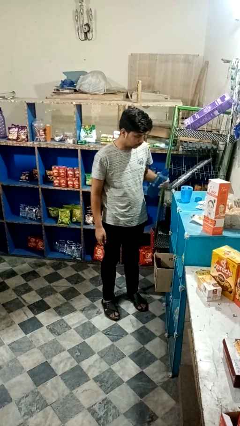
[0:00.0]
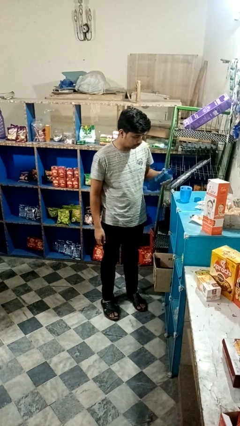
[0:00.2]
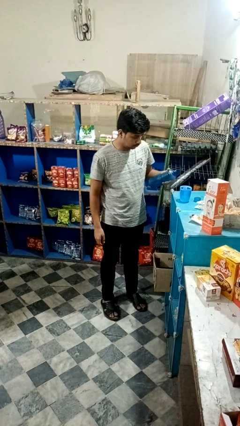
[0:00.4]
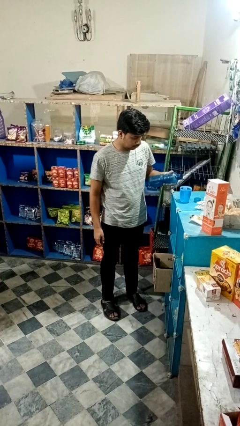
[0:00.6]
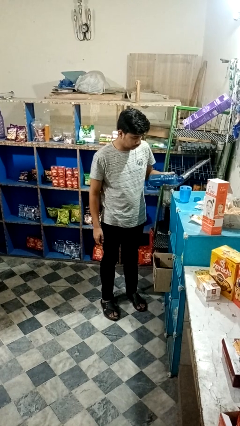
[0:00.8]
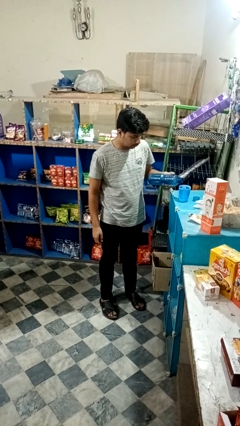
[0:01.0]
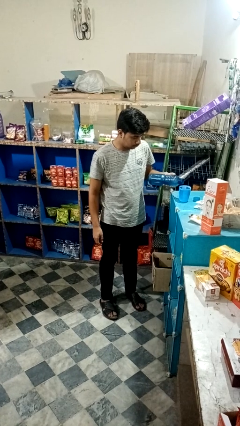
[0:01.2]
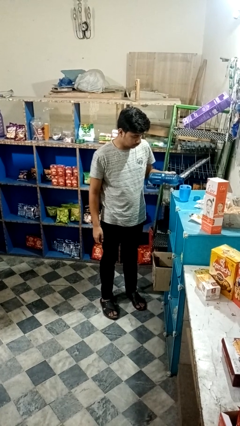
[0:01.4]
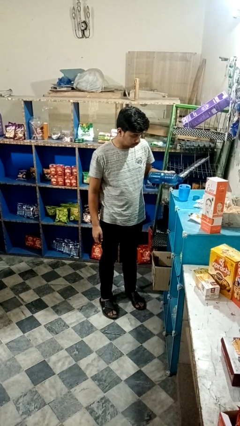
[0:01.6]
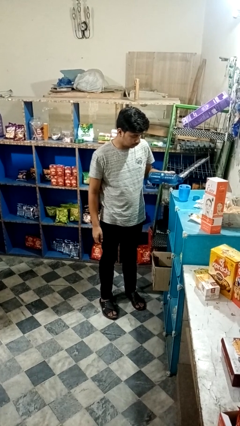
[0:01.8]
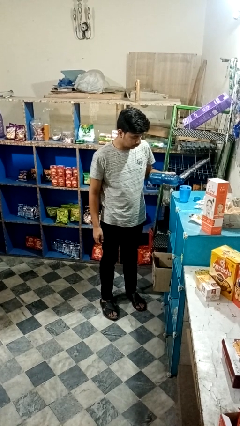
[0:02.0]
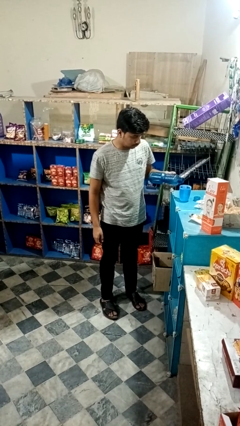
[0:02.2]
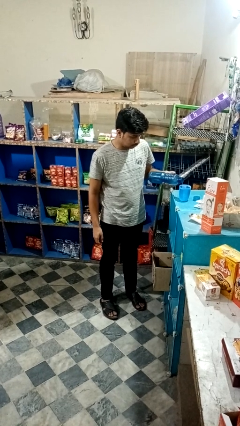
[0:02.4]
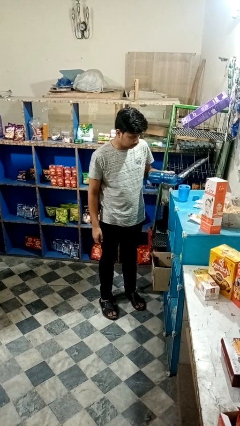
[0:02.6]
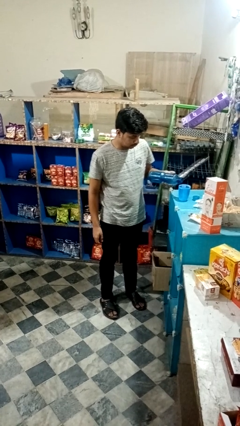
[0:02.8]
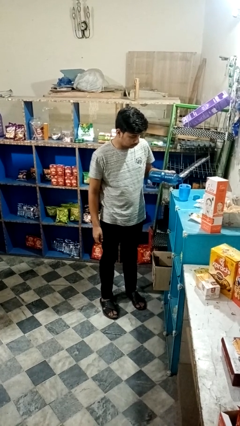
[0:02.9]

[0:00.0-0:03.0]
person pours liquid into cup

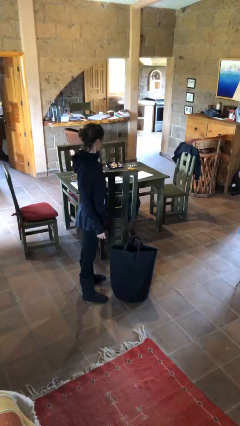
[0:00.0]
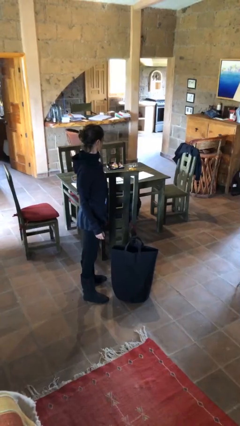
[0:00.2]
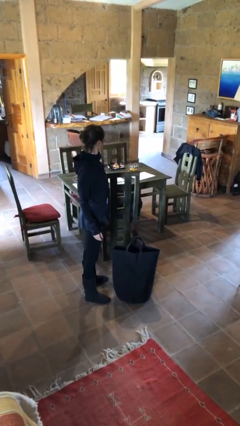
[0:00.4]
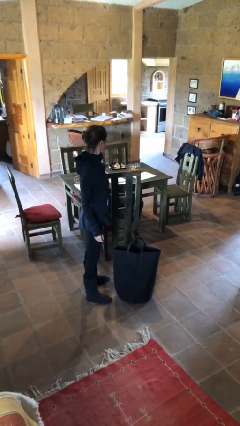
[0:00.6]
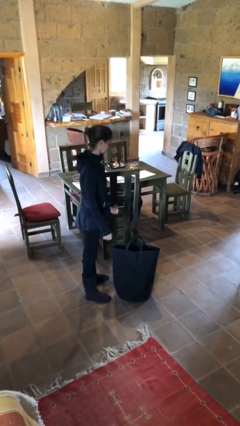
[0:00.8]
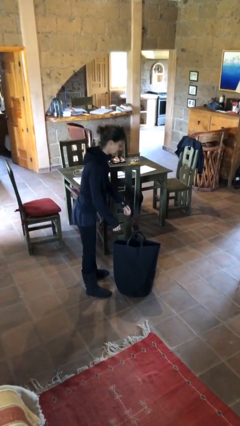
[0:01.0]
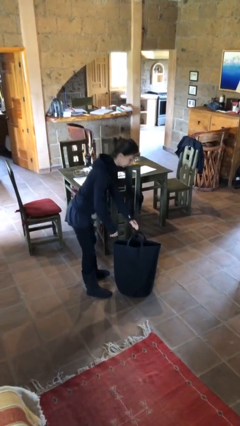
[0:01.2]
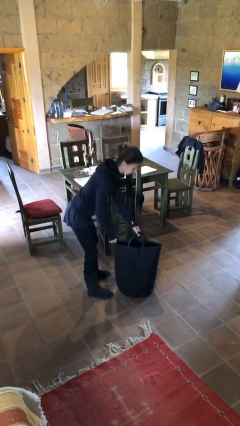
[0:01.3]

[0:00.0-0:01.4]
person picks up object from floor

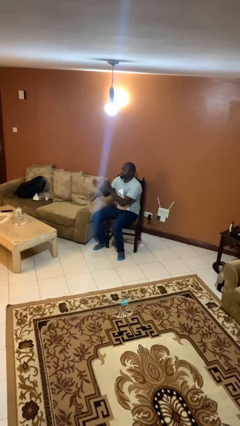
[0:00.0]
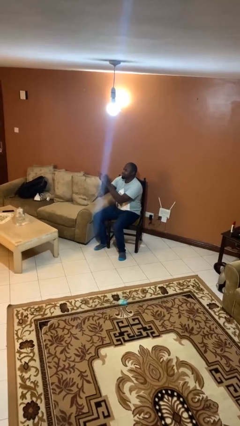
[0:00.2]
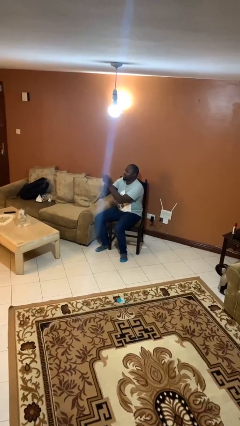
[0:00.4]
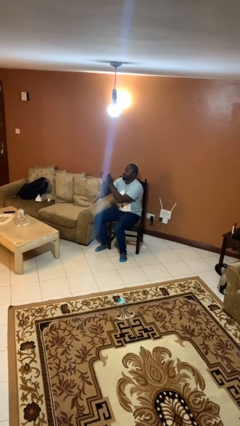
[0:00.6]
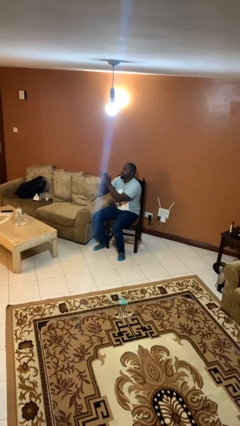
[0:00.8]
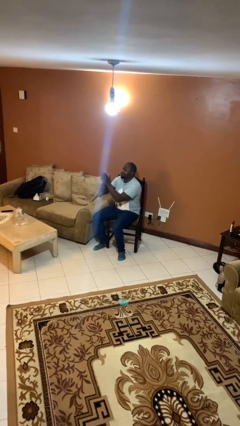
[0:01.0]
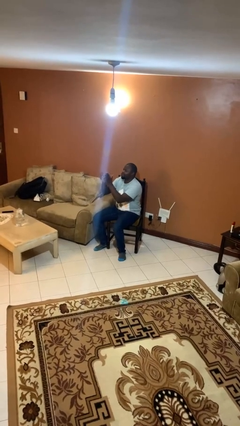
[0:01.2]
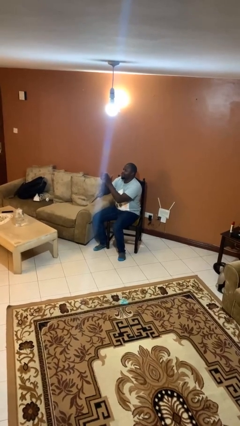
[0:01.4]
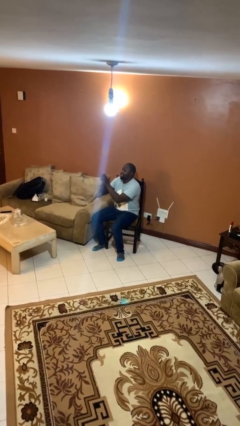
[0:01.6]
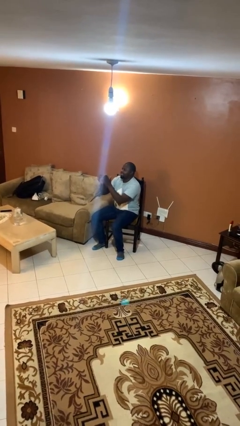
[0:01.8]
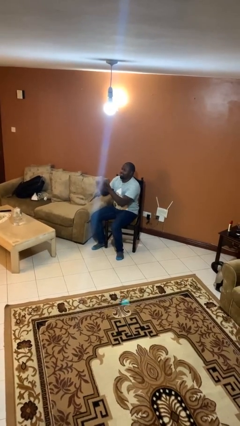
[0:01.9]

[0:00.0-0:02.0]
person claps hands

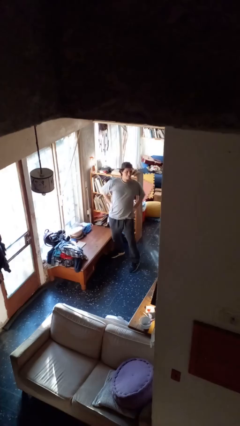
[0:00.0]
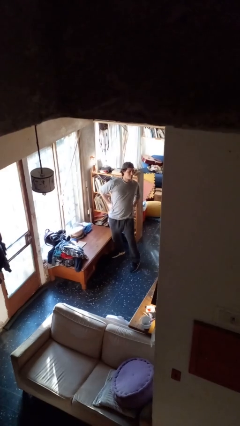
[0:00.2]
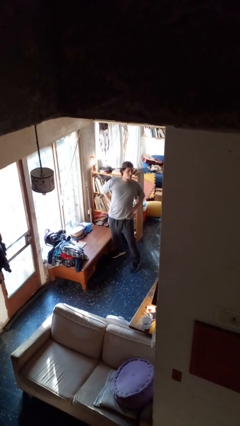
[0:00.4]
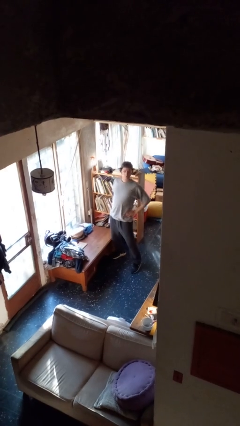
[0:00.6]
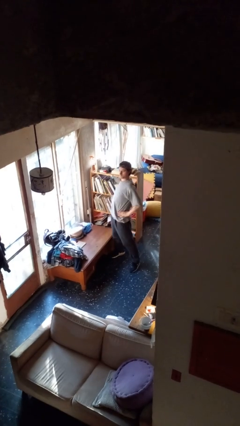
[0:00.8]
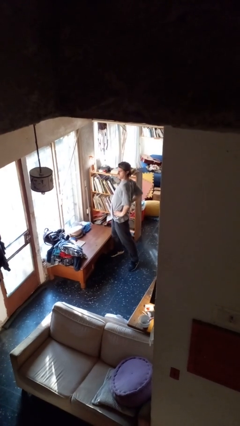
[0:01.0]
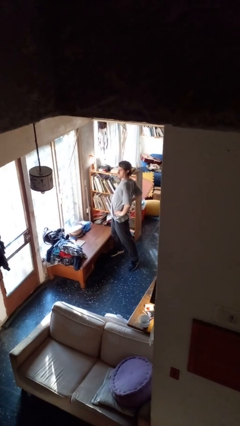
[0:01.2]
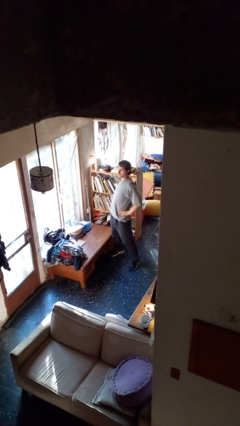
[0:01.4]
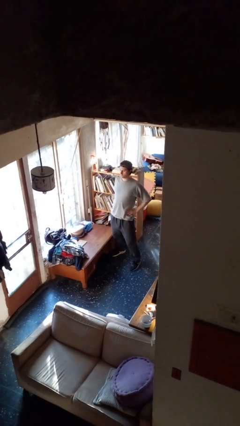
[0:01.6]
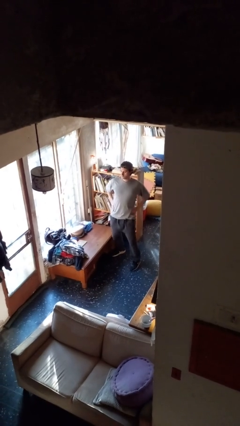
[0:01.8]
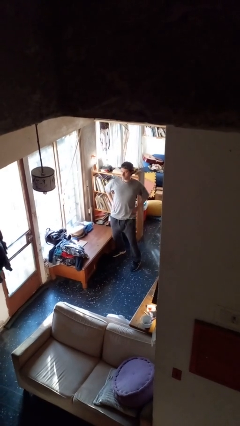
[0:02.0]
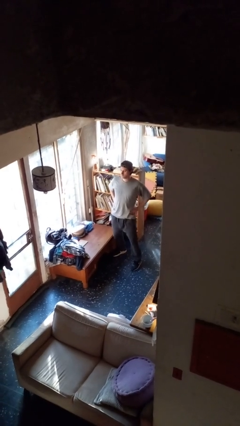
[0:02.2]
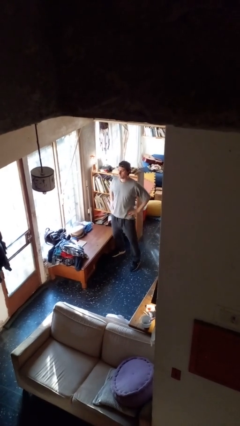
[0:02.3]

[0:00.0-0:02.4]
person stretches back

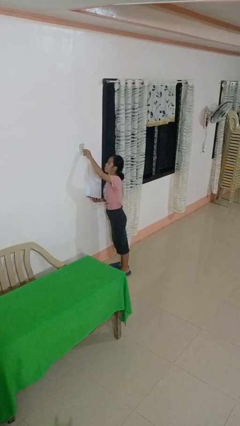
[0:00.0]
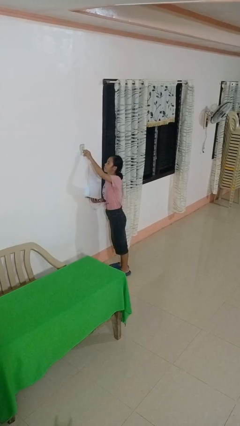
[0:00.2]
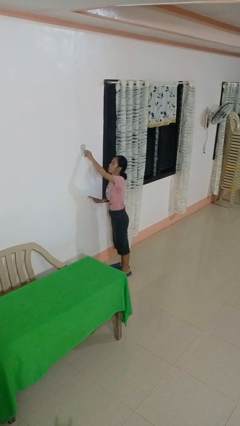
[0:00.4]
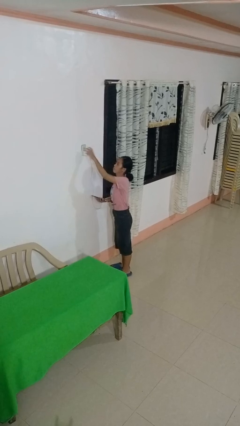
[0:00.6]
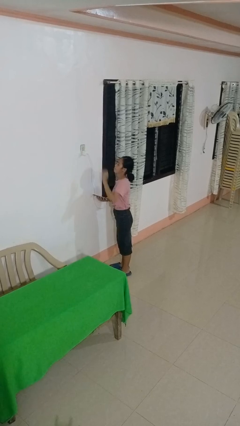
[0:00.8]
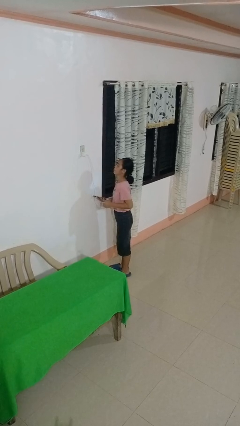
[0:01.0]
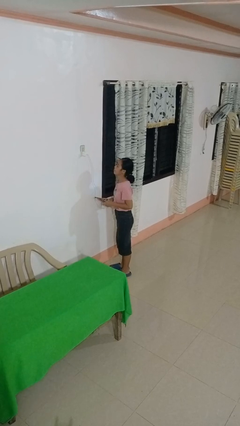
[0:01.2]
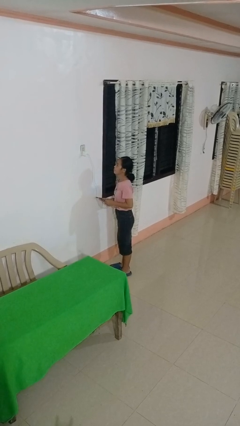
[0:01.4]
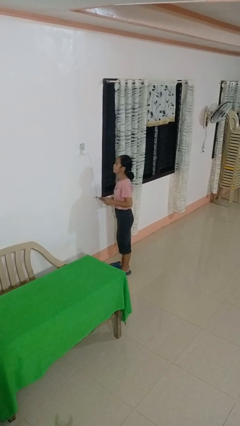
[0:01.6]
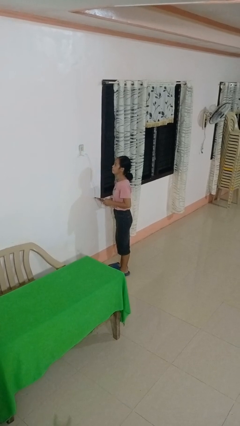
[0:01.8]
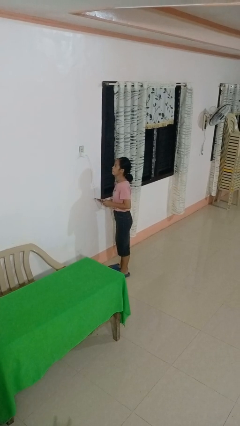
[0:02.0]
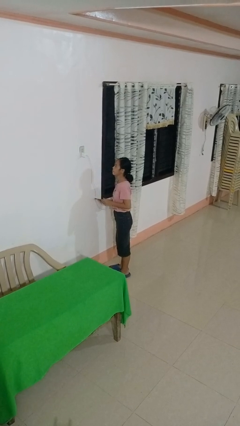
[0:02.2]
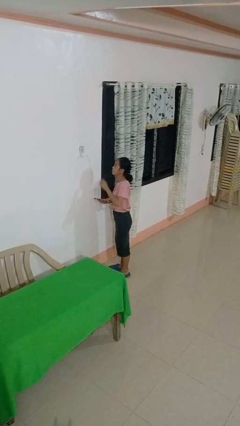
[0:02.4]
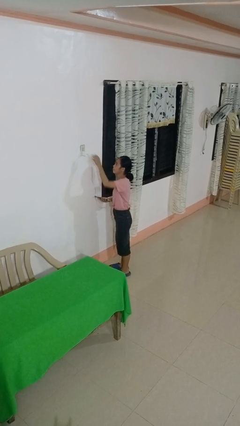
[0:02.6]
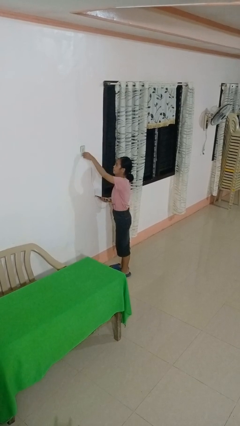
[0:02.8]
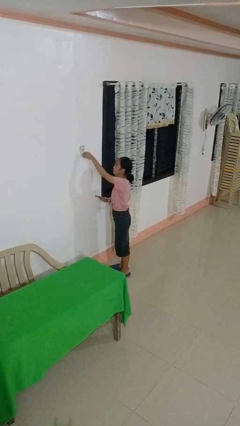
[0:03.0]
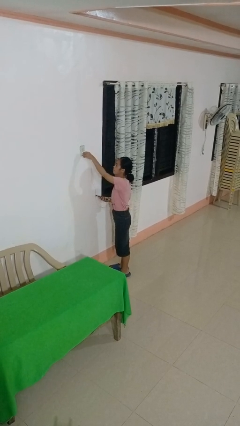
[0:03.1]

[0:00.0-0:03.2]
person plugs into electrical socket

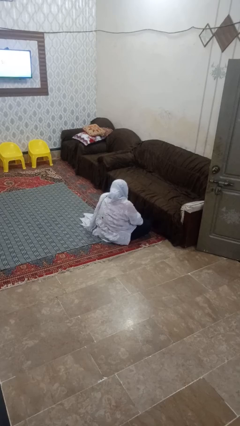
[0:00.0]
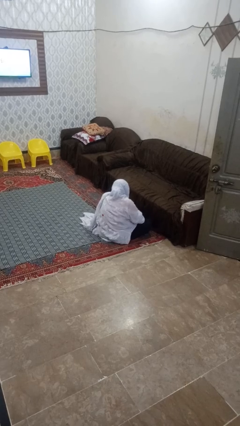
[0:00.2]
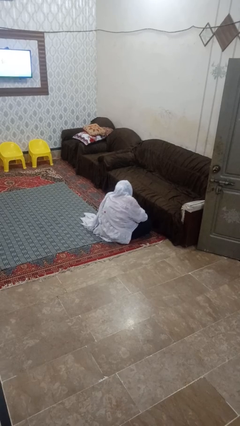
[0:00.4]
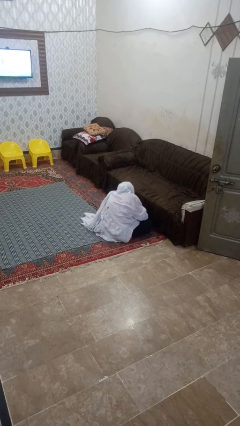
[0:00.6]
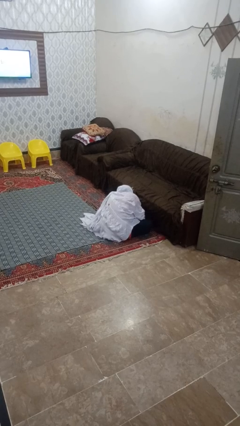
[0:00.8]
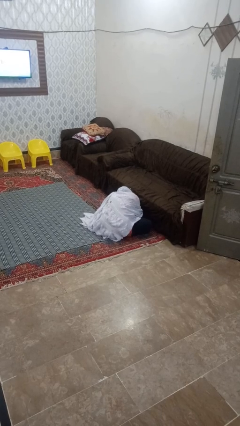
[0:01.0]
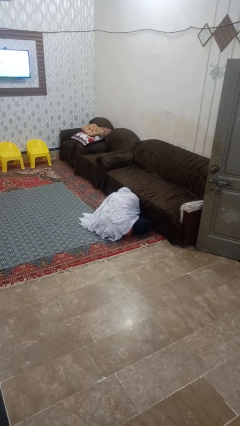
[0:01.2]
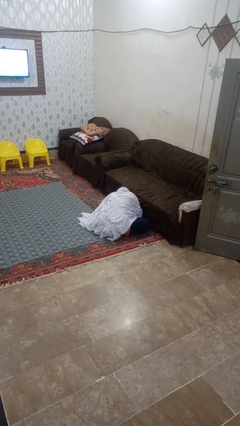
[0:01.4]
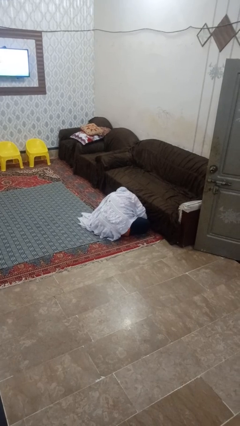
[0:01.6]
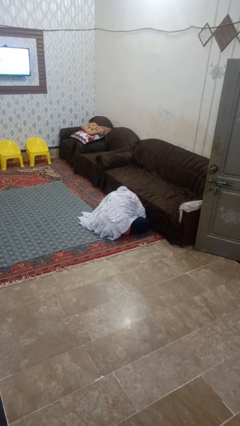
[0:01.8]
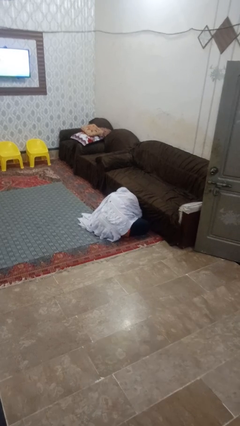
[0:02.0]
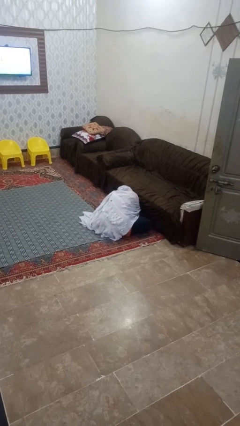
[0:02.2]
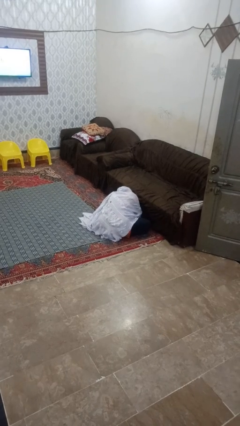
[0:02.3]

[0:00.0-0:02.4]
person searches under couch

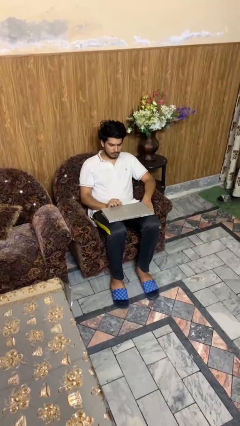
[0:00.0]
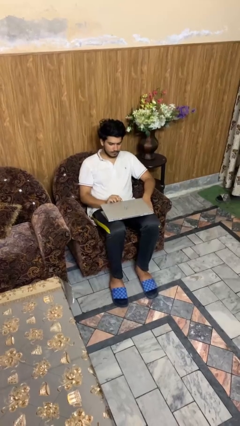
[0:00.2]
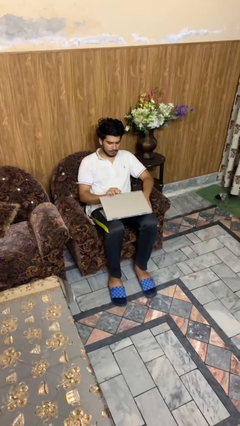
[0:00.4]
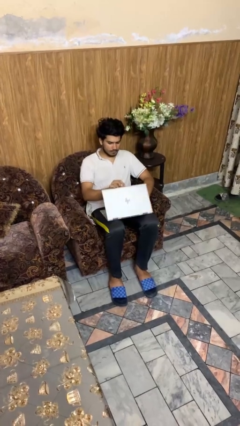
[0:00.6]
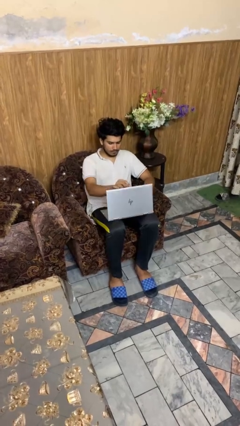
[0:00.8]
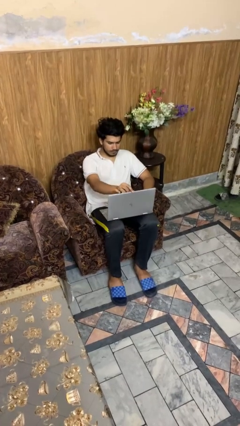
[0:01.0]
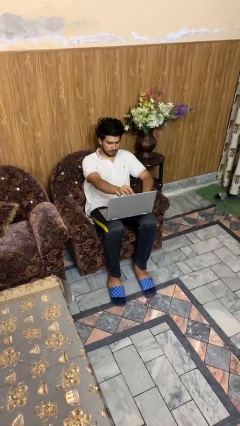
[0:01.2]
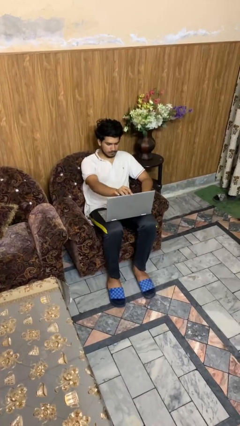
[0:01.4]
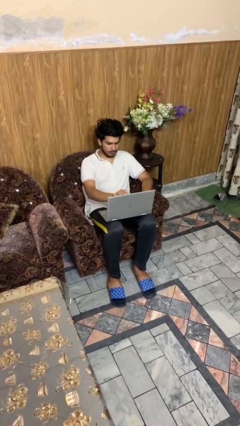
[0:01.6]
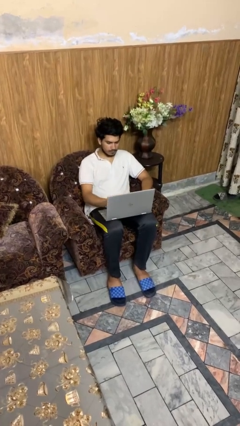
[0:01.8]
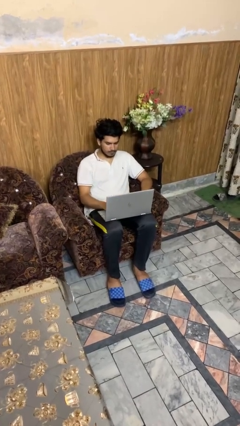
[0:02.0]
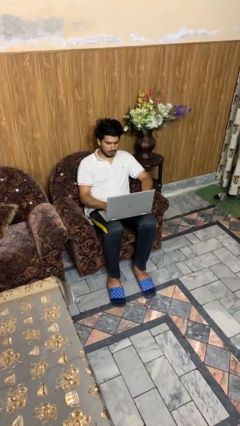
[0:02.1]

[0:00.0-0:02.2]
person opens laptop

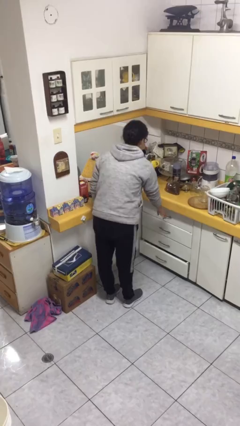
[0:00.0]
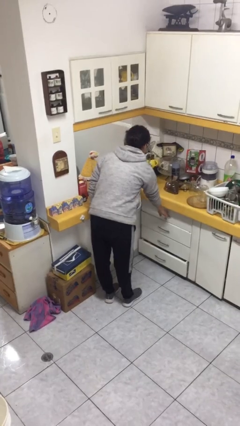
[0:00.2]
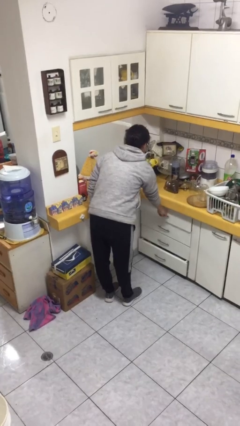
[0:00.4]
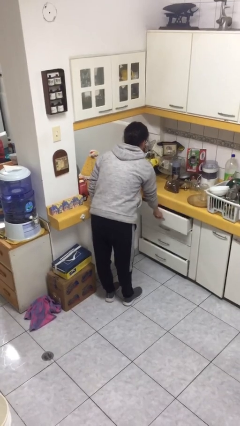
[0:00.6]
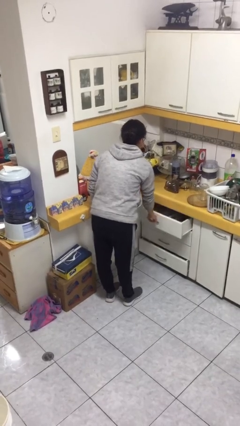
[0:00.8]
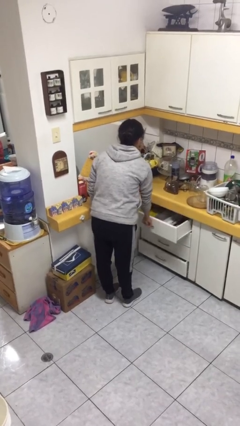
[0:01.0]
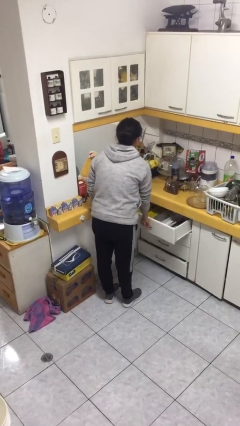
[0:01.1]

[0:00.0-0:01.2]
person opens kitchen drawer
